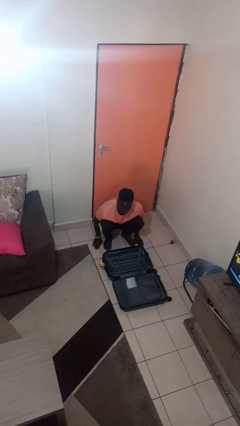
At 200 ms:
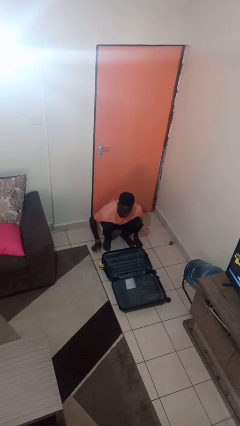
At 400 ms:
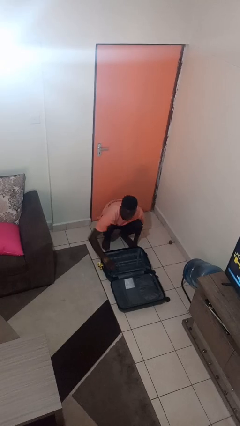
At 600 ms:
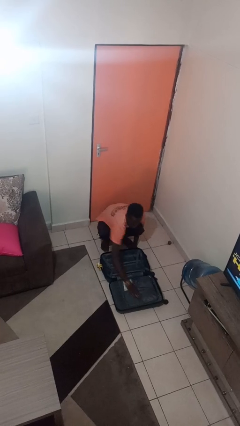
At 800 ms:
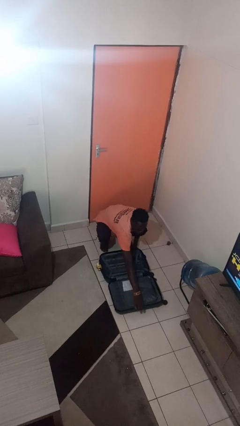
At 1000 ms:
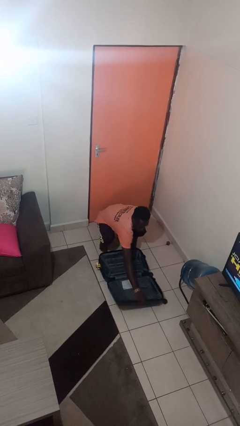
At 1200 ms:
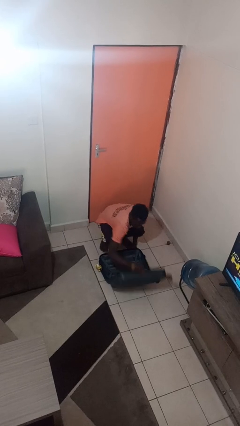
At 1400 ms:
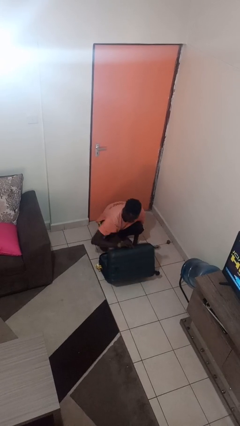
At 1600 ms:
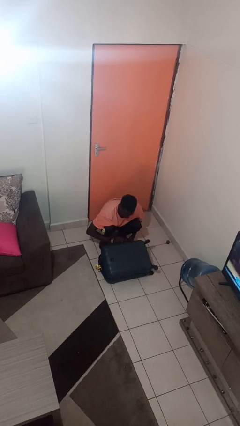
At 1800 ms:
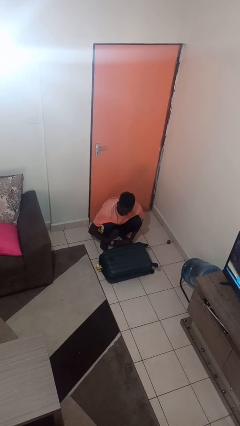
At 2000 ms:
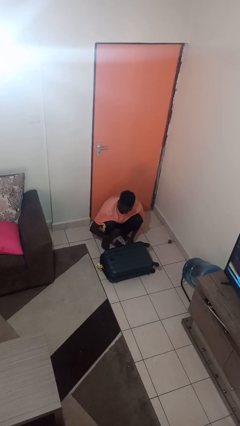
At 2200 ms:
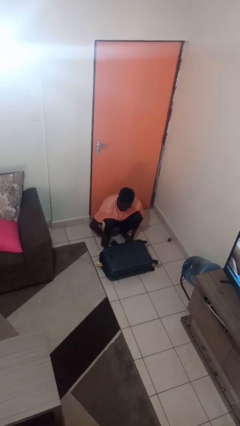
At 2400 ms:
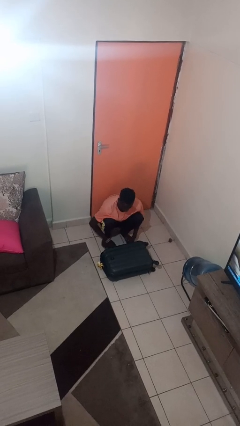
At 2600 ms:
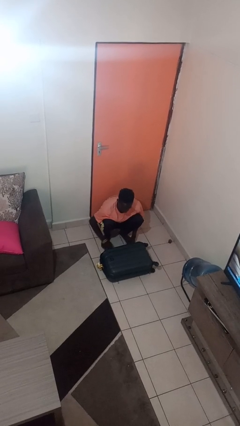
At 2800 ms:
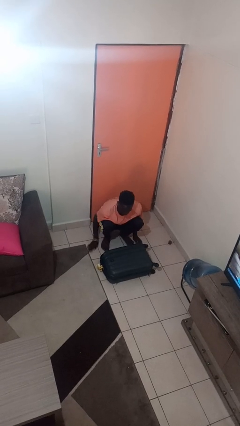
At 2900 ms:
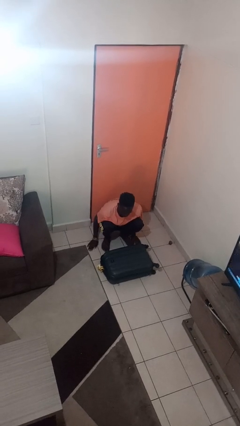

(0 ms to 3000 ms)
person closes suitcase

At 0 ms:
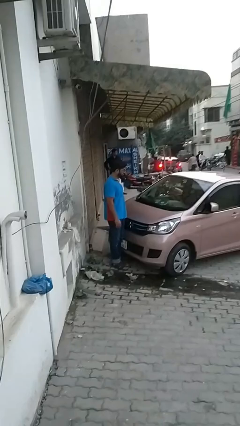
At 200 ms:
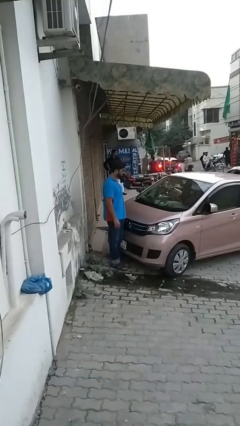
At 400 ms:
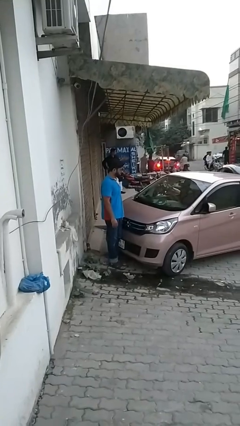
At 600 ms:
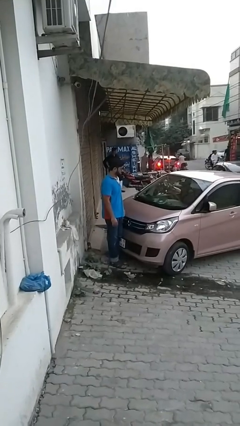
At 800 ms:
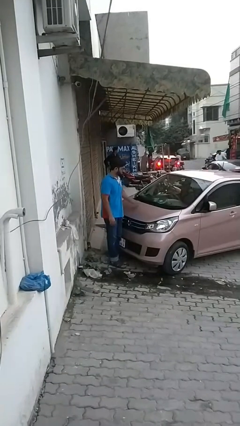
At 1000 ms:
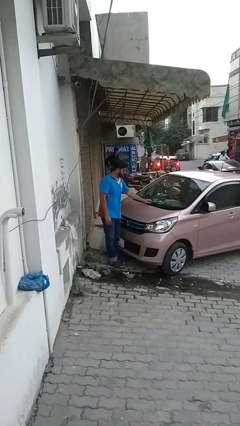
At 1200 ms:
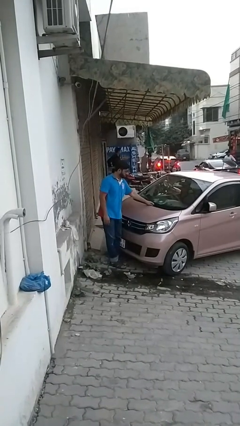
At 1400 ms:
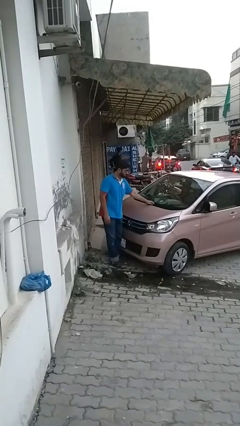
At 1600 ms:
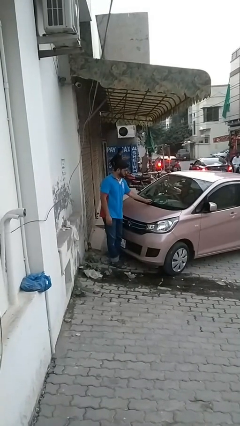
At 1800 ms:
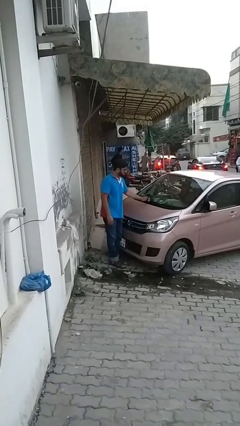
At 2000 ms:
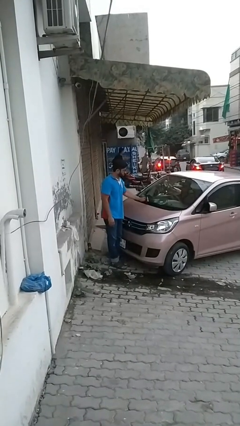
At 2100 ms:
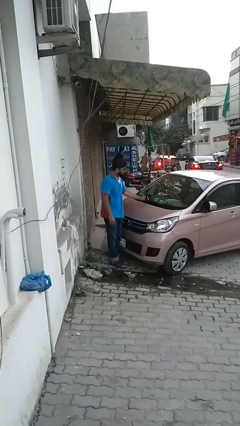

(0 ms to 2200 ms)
person flips up car wipers

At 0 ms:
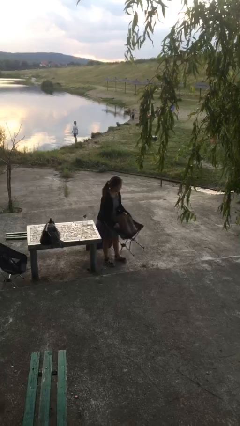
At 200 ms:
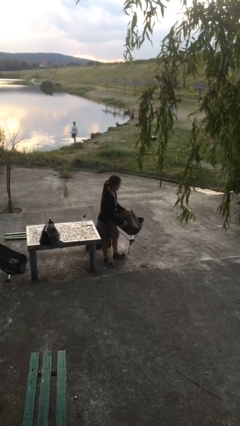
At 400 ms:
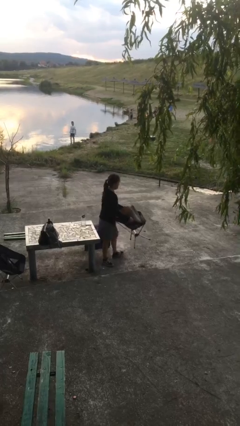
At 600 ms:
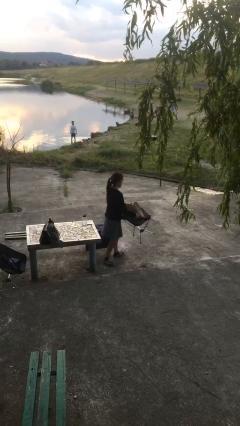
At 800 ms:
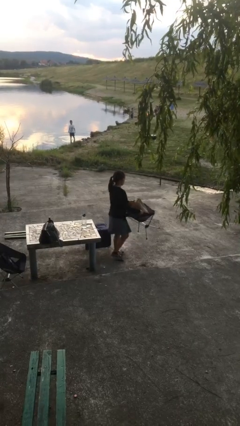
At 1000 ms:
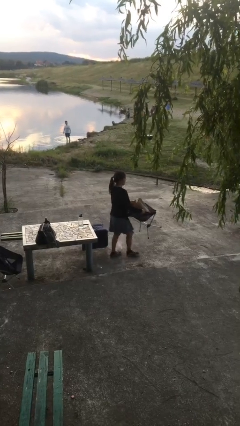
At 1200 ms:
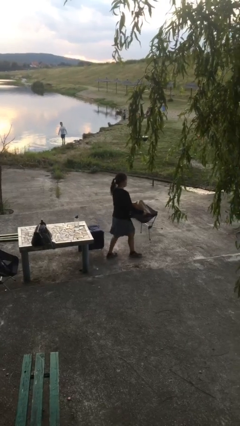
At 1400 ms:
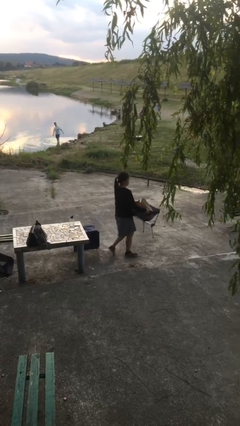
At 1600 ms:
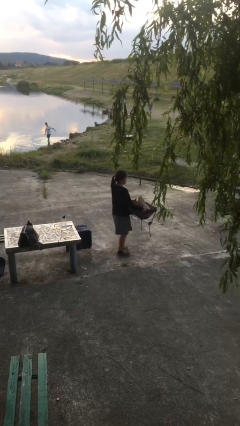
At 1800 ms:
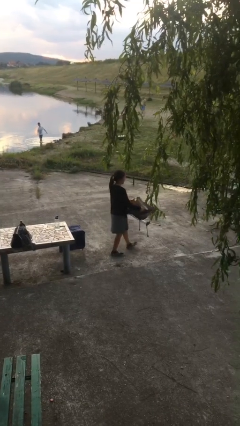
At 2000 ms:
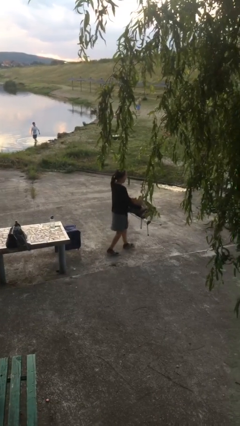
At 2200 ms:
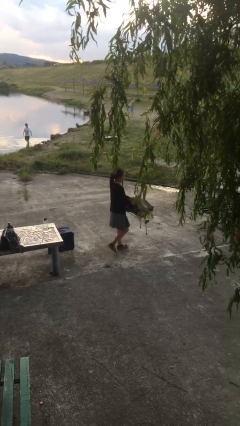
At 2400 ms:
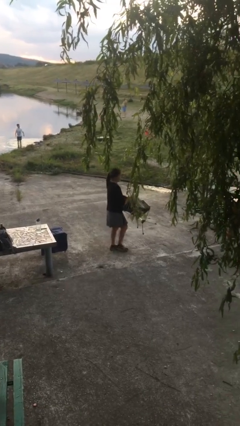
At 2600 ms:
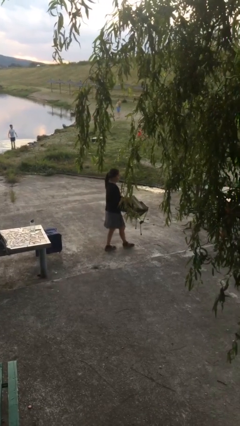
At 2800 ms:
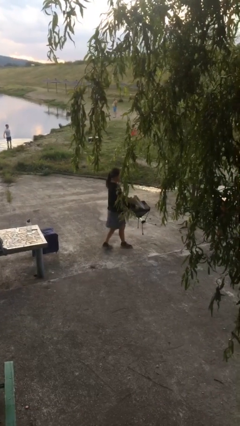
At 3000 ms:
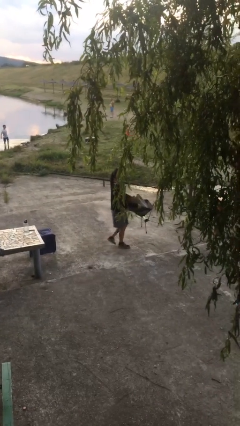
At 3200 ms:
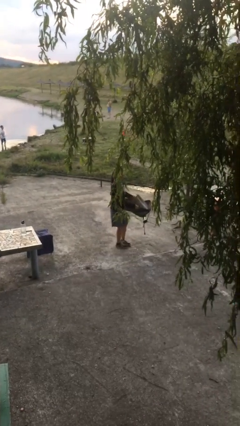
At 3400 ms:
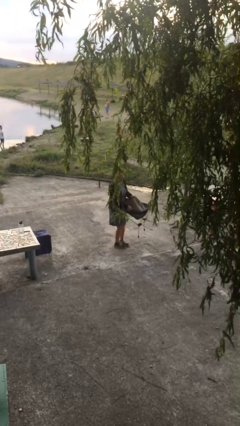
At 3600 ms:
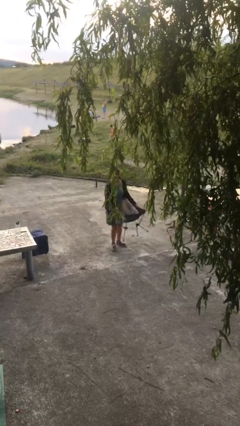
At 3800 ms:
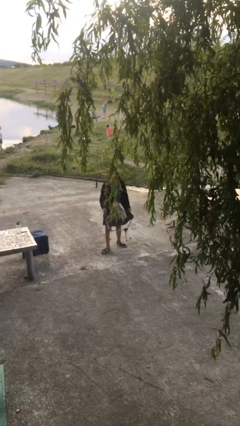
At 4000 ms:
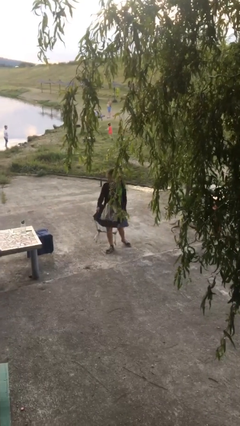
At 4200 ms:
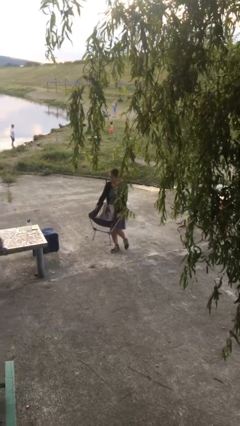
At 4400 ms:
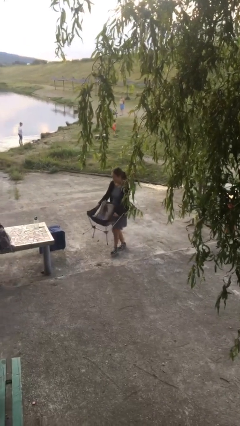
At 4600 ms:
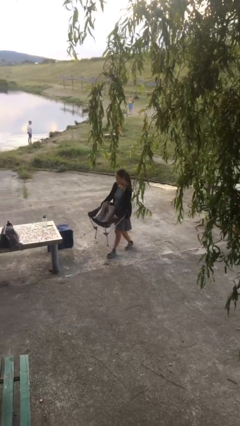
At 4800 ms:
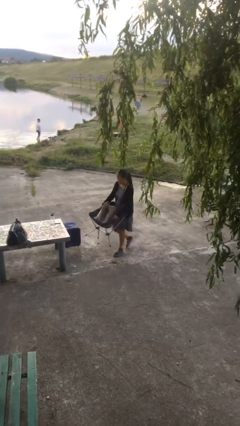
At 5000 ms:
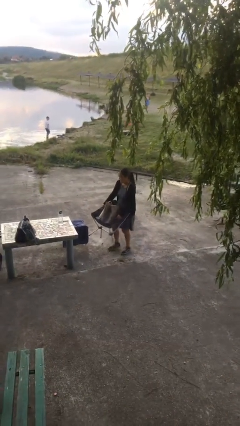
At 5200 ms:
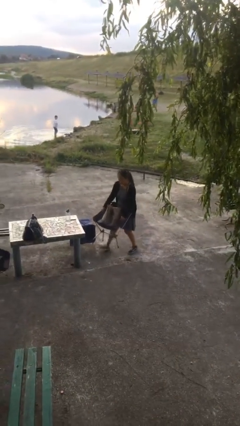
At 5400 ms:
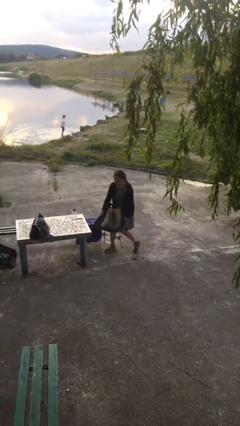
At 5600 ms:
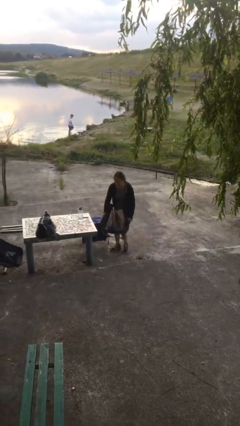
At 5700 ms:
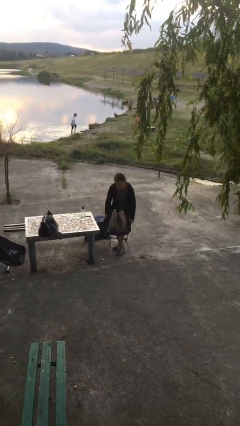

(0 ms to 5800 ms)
person carries heavy object

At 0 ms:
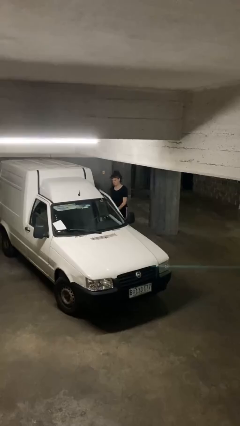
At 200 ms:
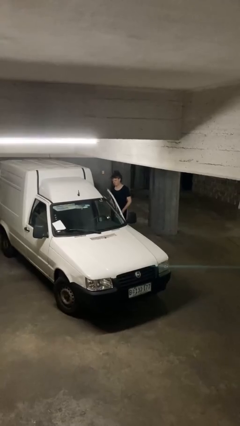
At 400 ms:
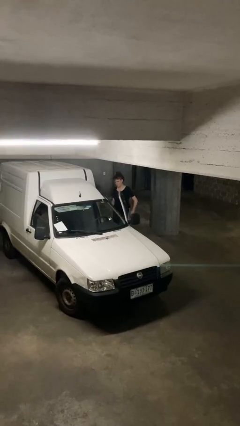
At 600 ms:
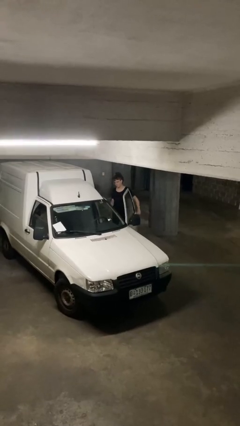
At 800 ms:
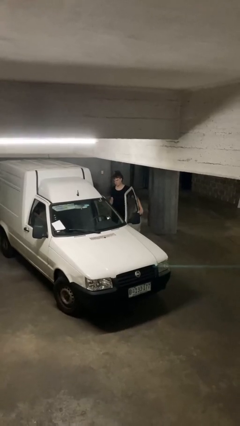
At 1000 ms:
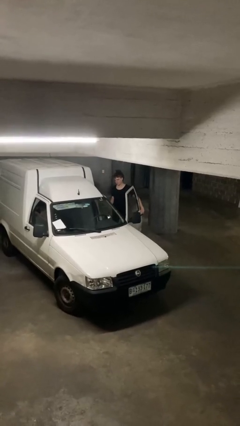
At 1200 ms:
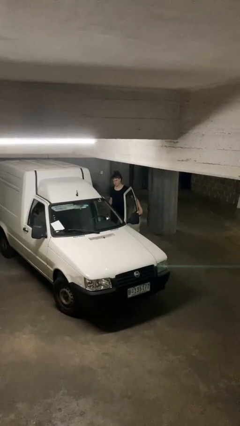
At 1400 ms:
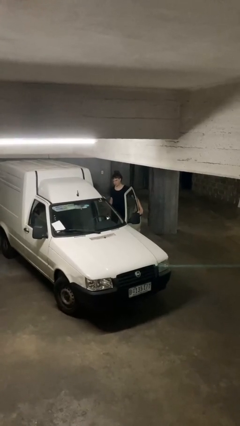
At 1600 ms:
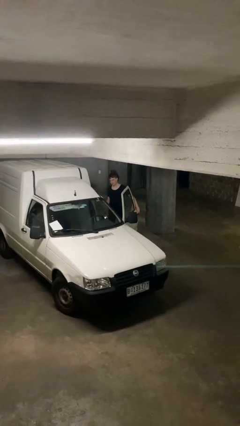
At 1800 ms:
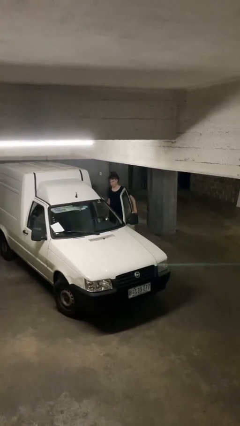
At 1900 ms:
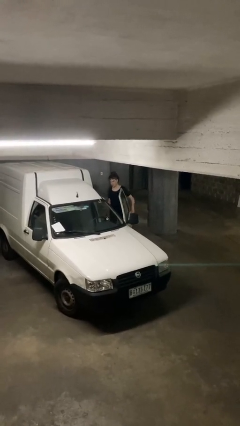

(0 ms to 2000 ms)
person opens car door

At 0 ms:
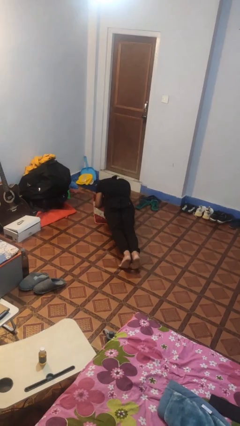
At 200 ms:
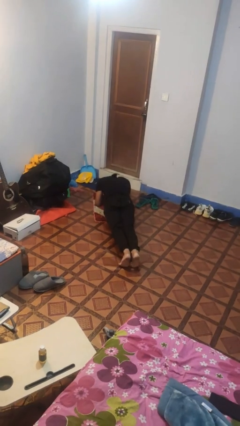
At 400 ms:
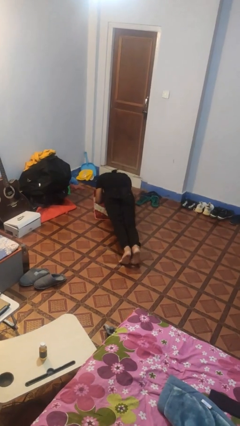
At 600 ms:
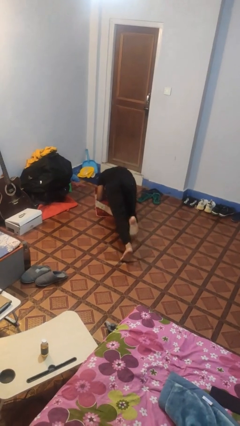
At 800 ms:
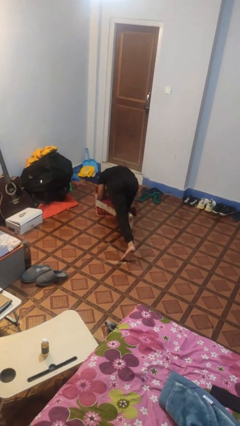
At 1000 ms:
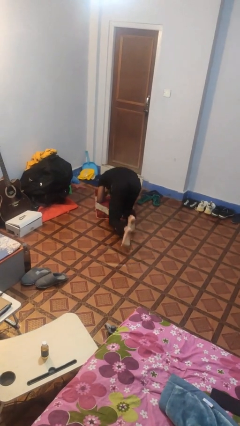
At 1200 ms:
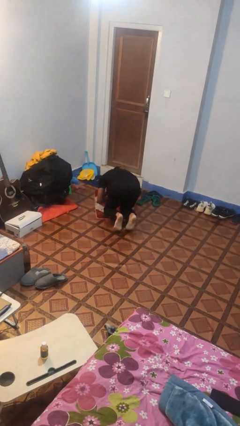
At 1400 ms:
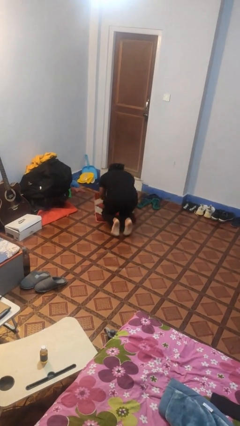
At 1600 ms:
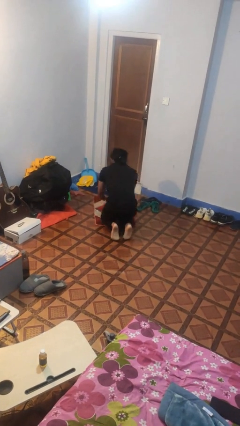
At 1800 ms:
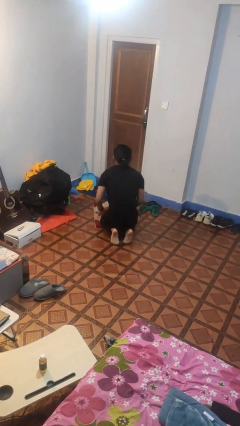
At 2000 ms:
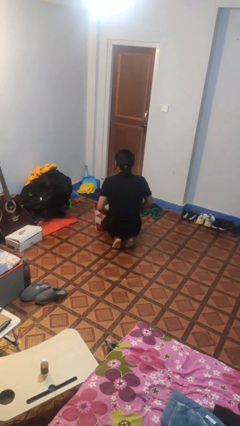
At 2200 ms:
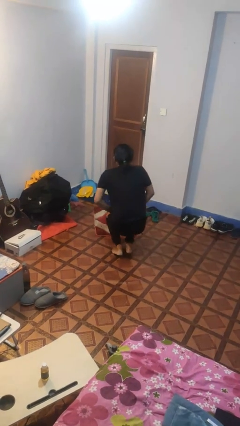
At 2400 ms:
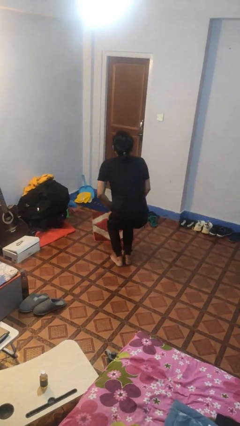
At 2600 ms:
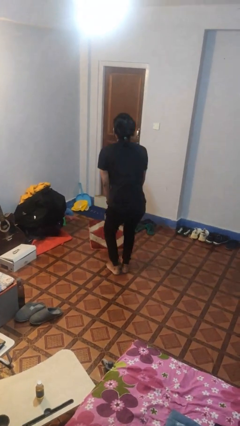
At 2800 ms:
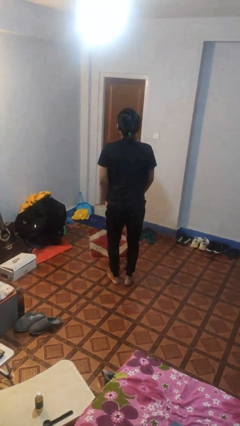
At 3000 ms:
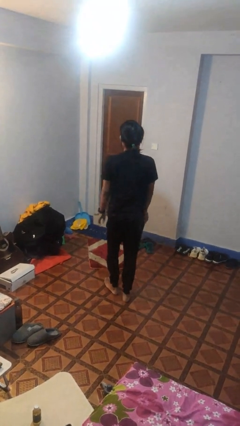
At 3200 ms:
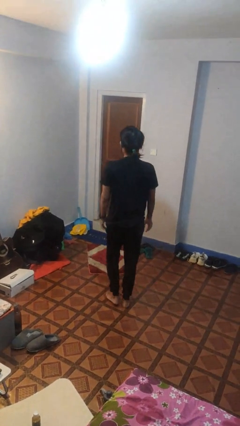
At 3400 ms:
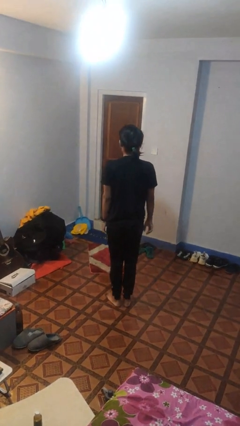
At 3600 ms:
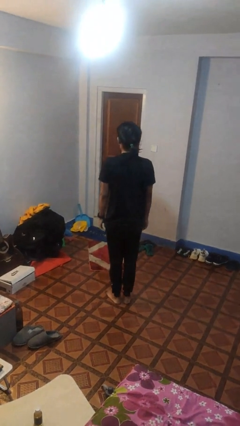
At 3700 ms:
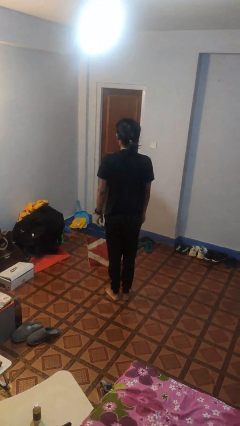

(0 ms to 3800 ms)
person stands up from floor

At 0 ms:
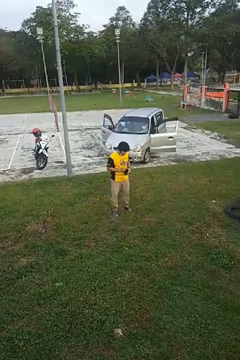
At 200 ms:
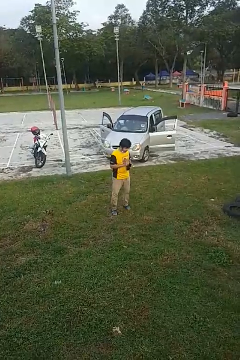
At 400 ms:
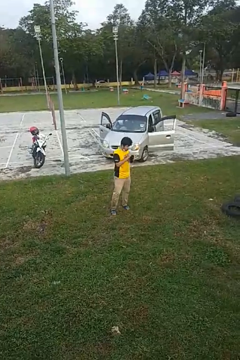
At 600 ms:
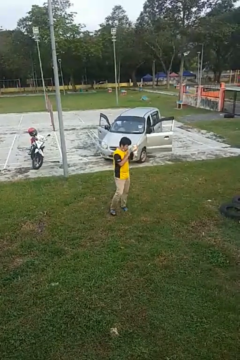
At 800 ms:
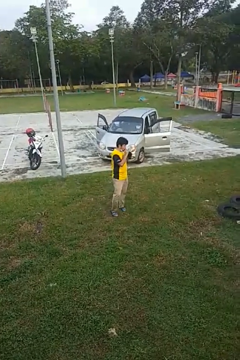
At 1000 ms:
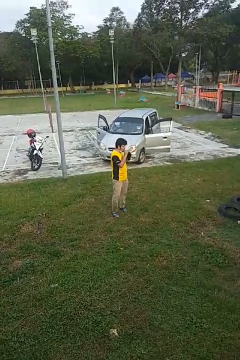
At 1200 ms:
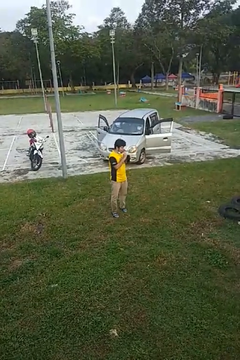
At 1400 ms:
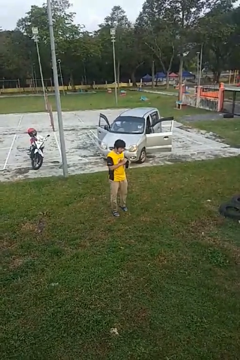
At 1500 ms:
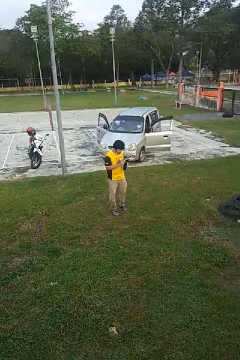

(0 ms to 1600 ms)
person drinks from straw
